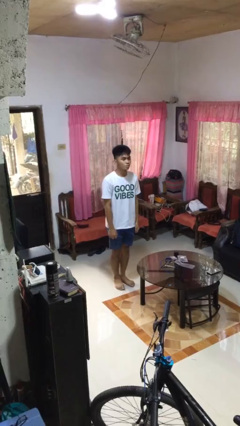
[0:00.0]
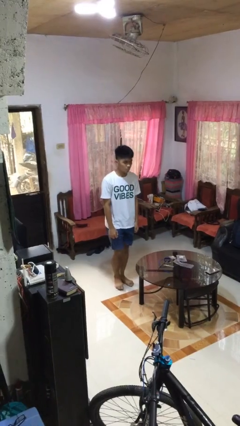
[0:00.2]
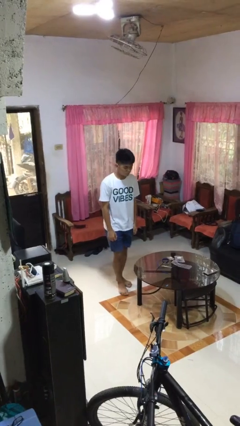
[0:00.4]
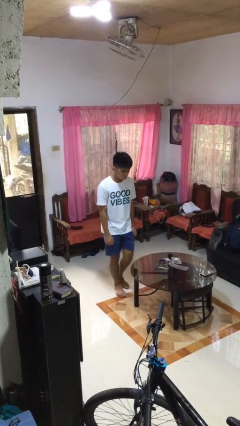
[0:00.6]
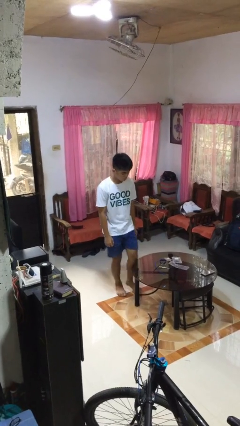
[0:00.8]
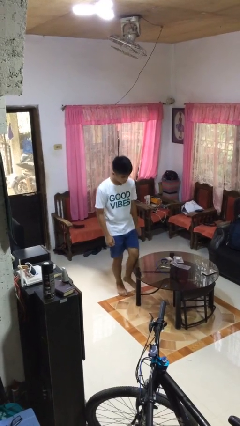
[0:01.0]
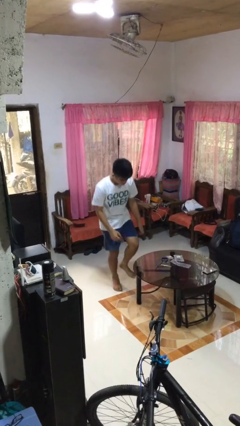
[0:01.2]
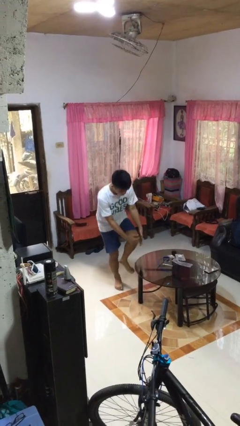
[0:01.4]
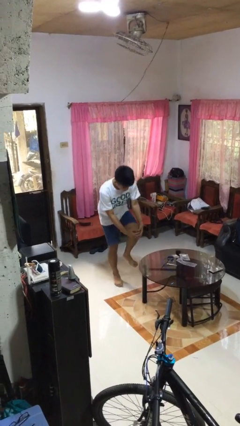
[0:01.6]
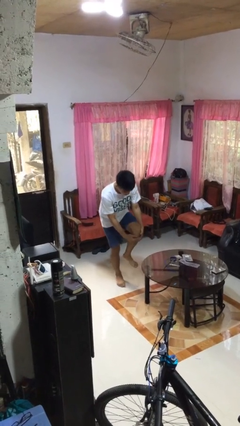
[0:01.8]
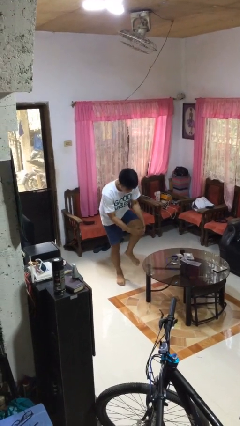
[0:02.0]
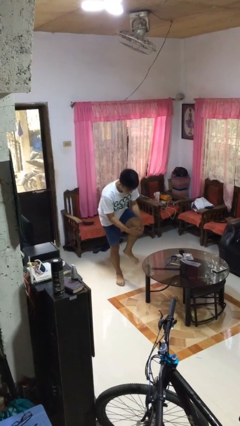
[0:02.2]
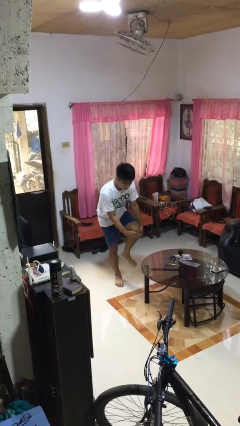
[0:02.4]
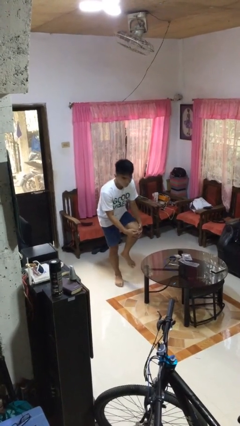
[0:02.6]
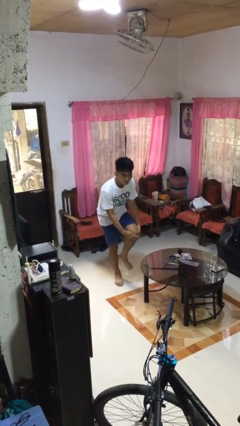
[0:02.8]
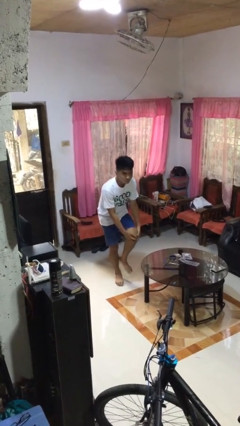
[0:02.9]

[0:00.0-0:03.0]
person bumps into table

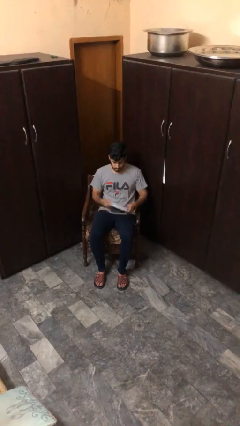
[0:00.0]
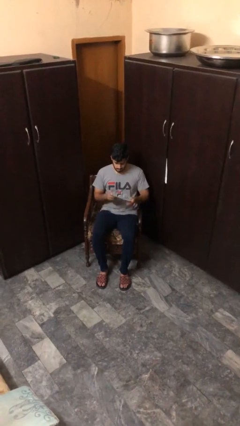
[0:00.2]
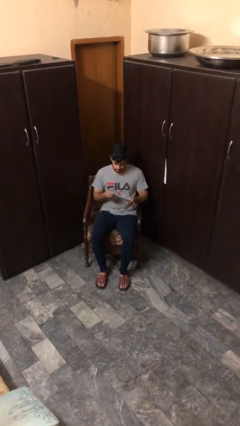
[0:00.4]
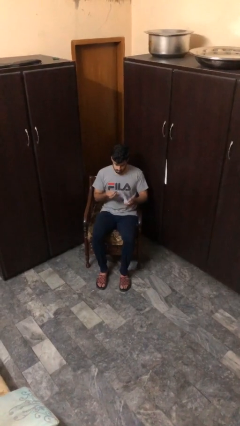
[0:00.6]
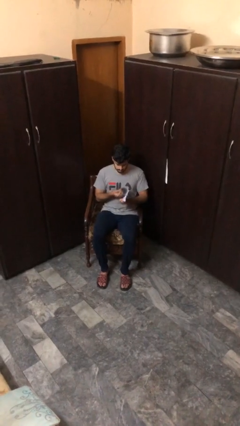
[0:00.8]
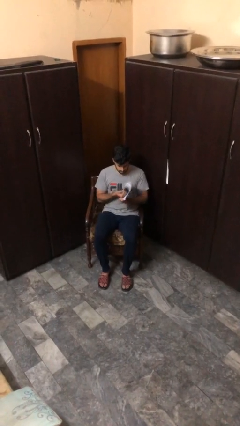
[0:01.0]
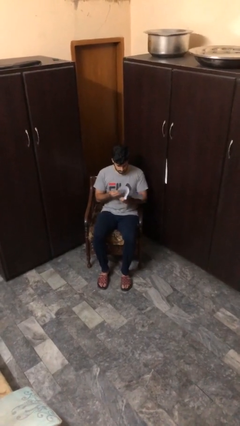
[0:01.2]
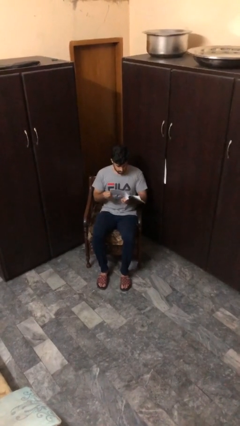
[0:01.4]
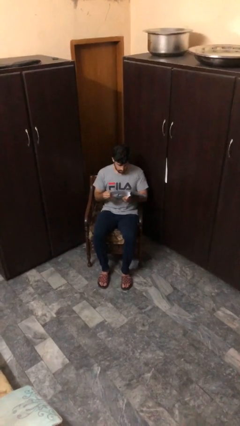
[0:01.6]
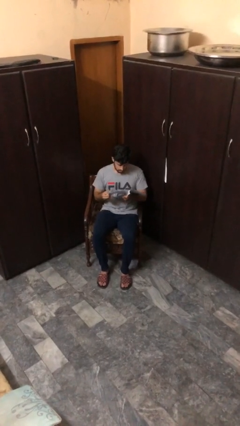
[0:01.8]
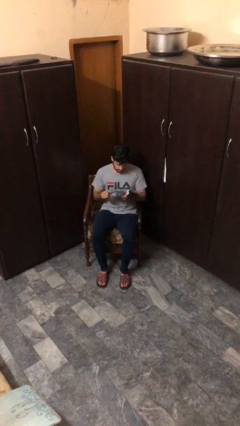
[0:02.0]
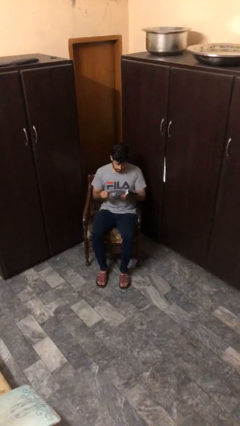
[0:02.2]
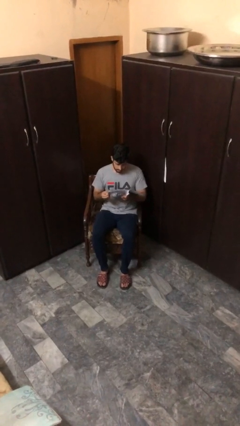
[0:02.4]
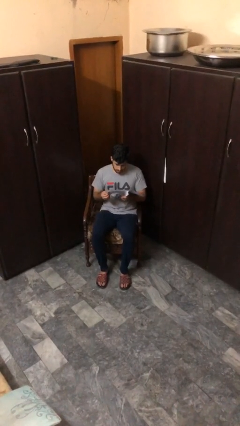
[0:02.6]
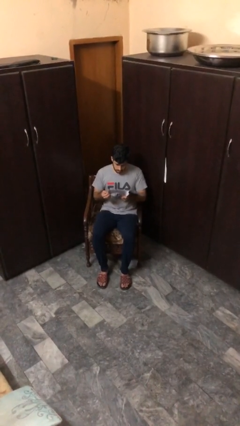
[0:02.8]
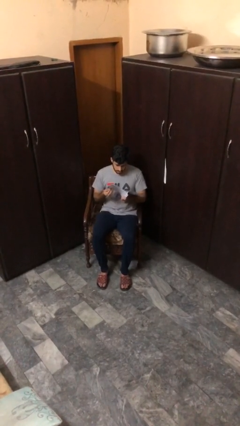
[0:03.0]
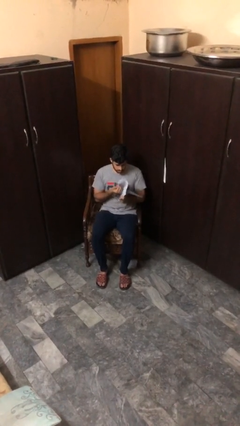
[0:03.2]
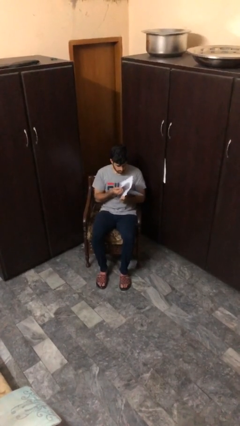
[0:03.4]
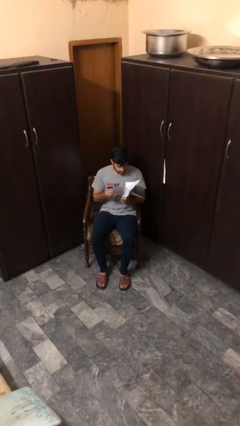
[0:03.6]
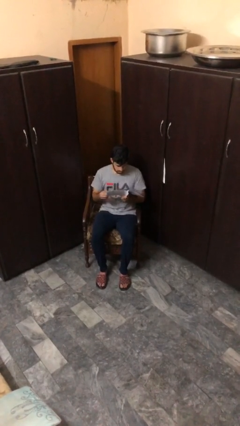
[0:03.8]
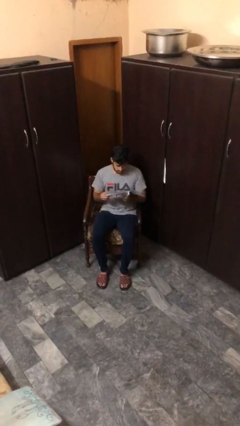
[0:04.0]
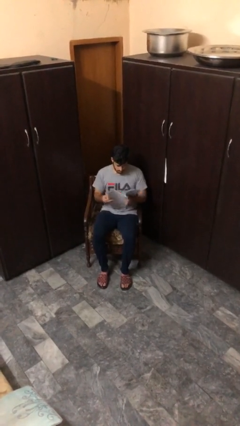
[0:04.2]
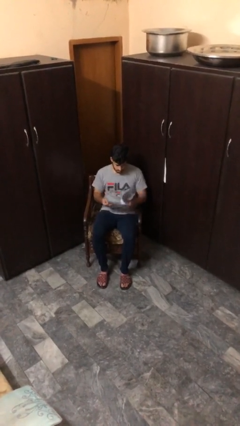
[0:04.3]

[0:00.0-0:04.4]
person reads magazine

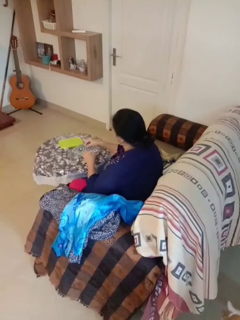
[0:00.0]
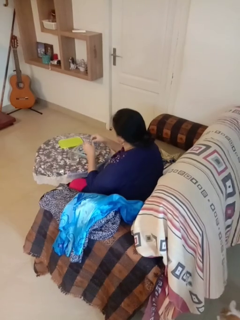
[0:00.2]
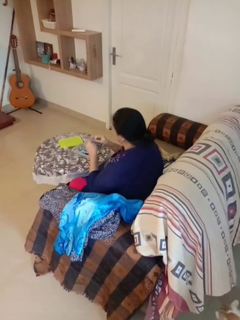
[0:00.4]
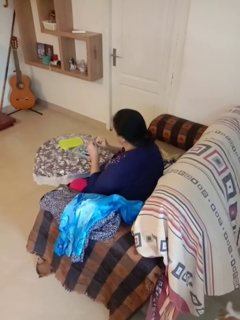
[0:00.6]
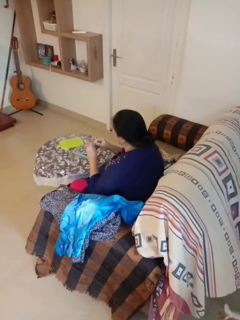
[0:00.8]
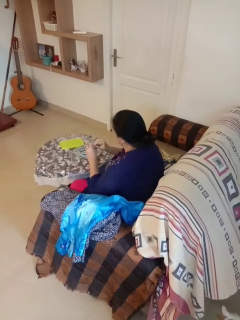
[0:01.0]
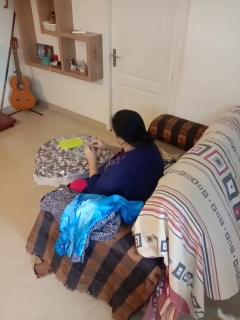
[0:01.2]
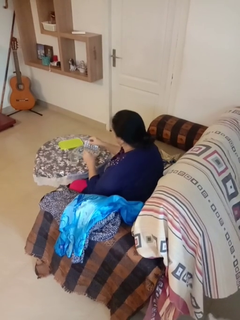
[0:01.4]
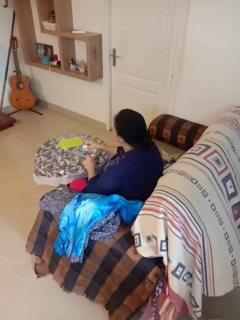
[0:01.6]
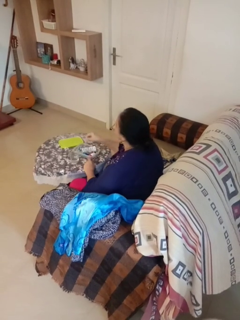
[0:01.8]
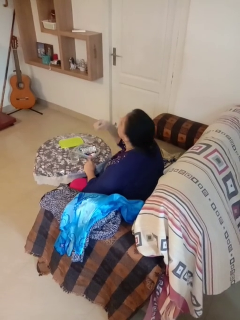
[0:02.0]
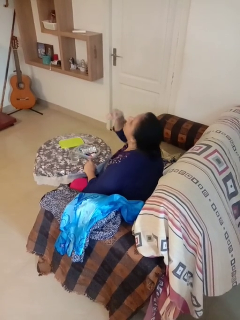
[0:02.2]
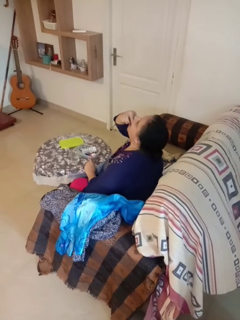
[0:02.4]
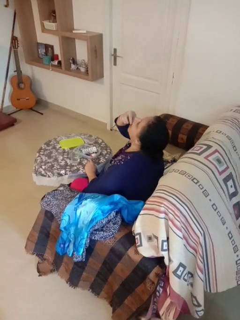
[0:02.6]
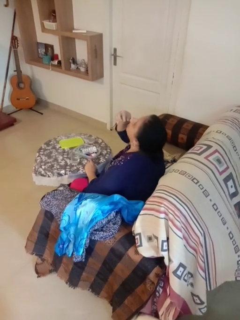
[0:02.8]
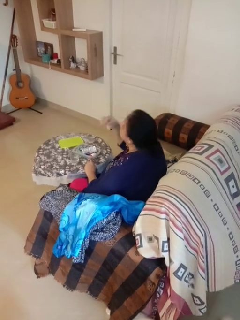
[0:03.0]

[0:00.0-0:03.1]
person takes medicine pills

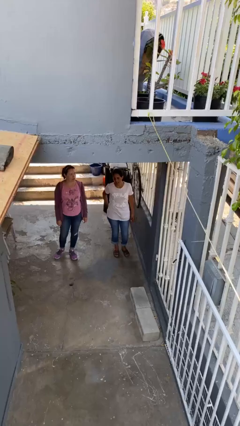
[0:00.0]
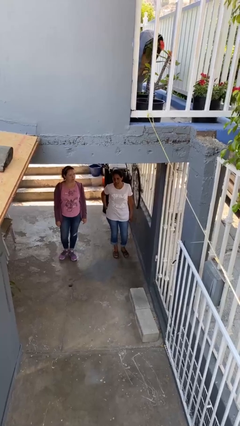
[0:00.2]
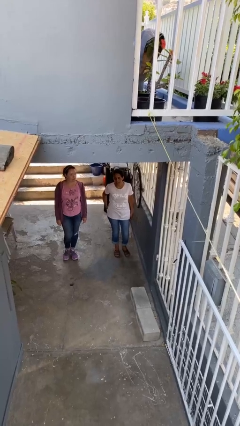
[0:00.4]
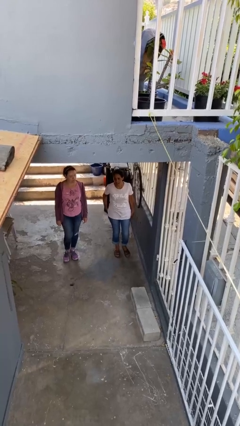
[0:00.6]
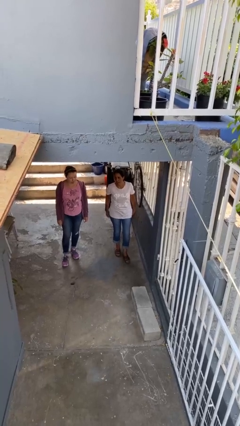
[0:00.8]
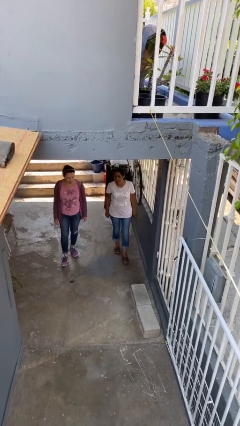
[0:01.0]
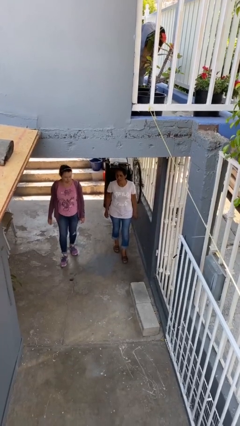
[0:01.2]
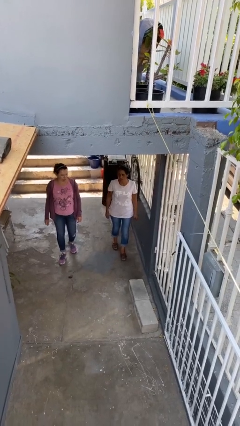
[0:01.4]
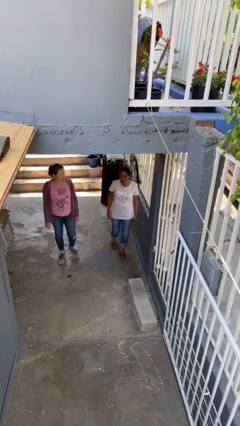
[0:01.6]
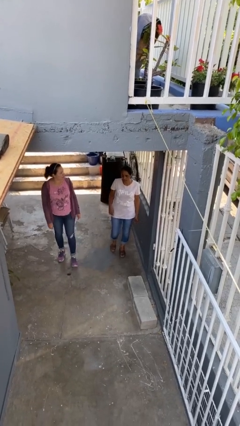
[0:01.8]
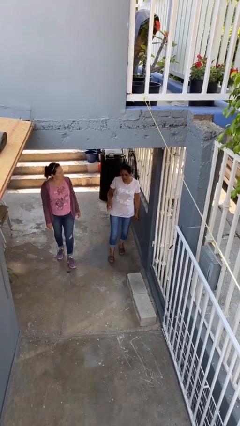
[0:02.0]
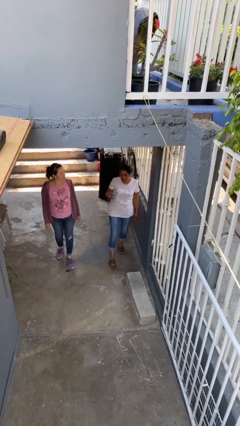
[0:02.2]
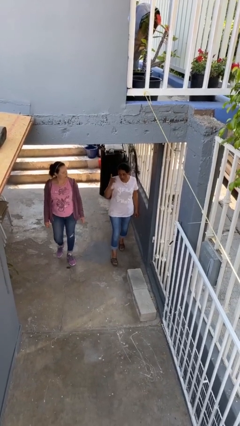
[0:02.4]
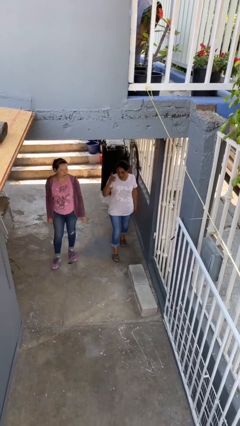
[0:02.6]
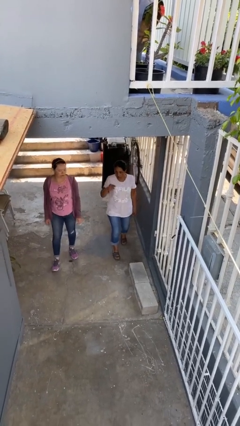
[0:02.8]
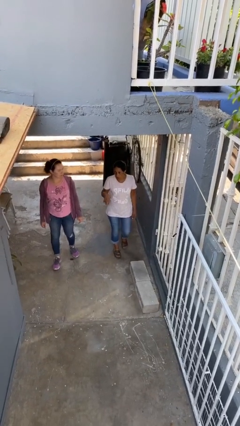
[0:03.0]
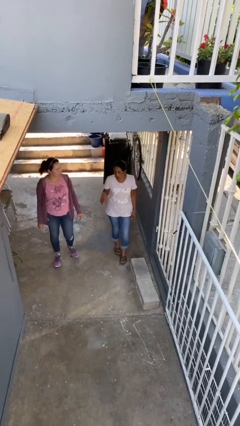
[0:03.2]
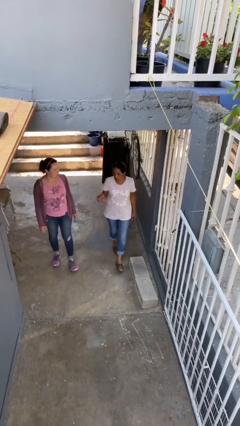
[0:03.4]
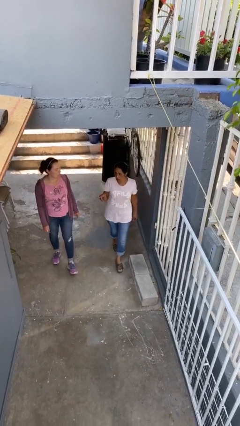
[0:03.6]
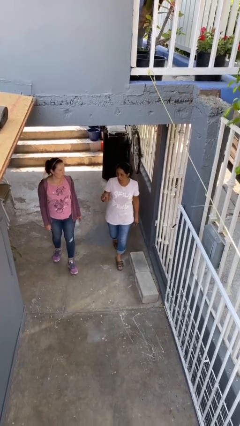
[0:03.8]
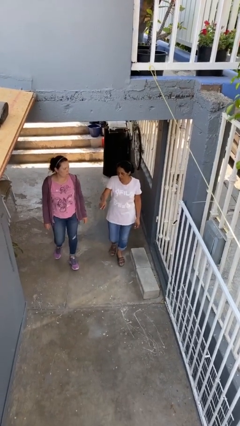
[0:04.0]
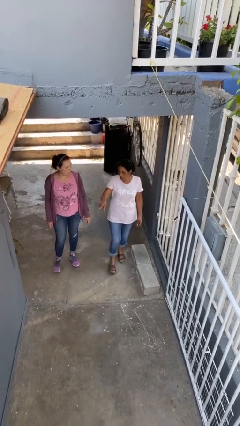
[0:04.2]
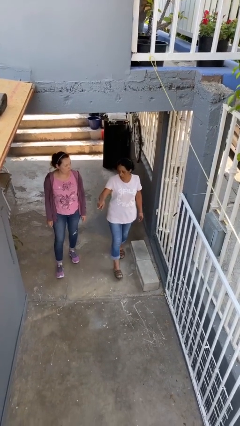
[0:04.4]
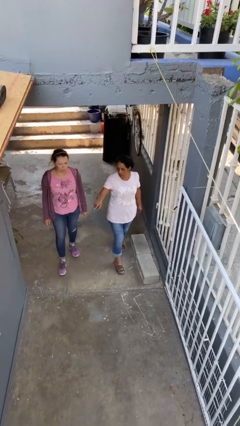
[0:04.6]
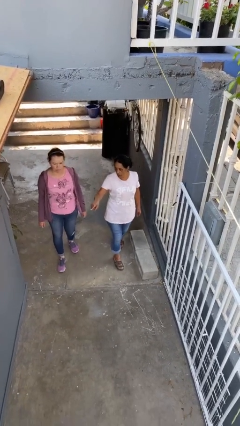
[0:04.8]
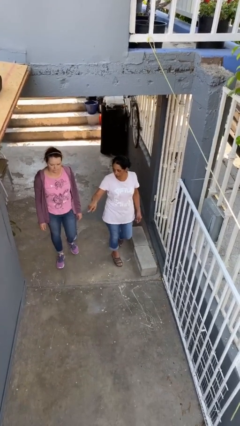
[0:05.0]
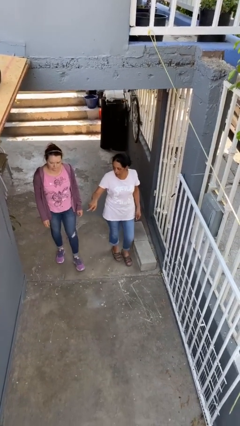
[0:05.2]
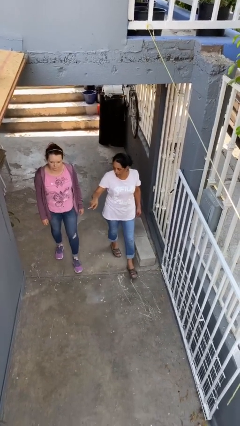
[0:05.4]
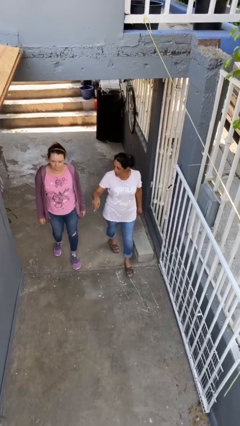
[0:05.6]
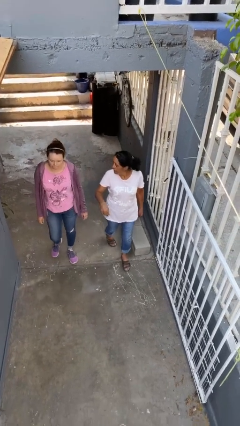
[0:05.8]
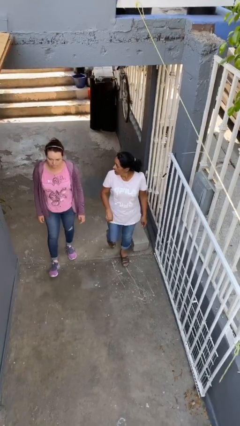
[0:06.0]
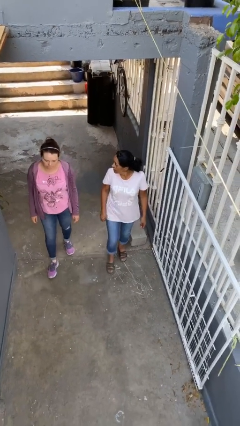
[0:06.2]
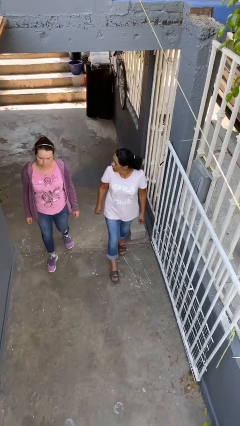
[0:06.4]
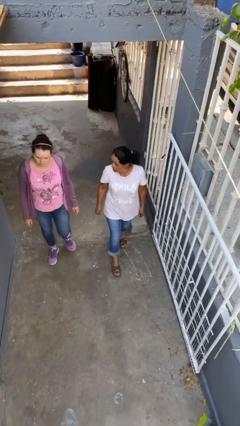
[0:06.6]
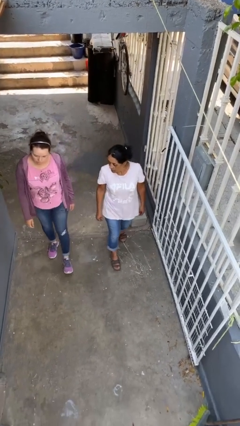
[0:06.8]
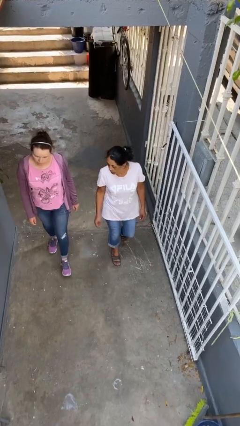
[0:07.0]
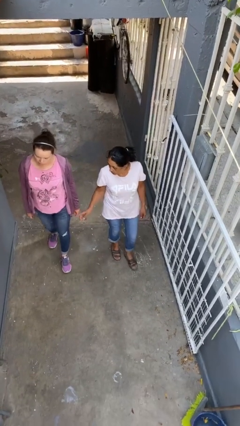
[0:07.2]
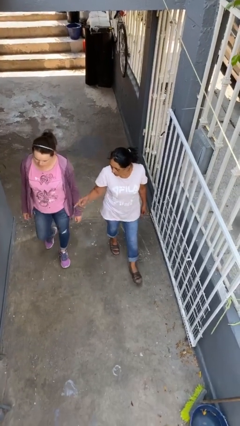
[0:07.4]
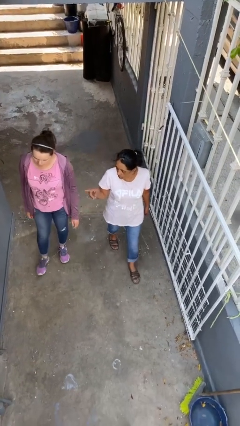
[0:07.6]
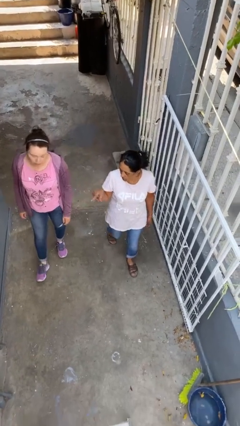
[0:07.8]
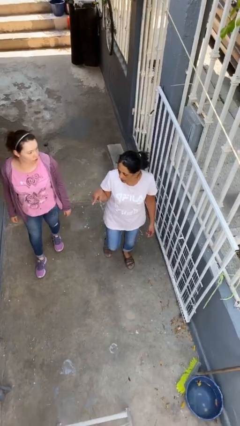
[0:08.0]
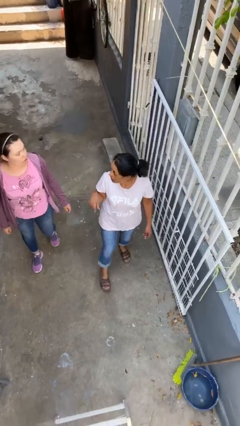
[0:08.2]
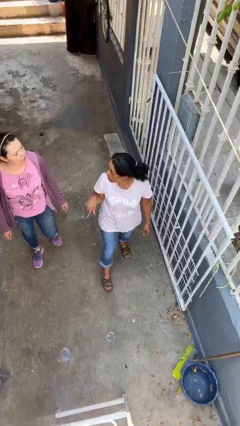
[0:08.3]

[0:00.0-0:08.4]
person talks to person
